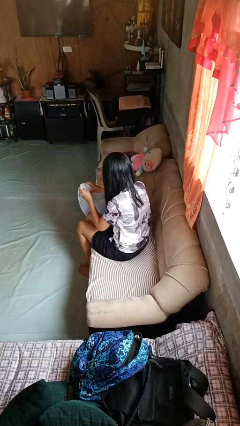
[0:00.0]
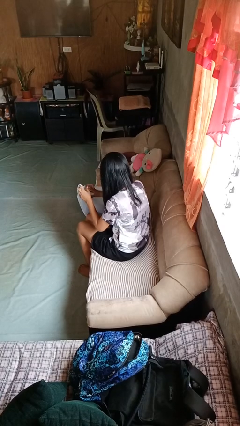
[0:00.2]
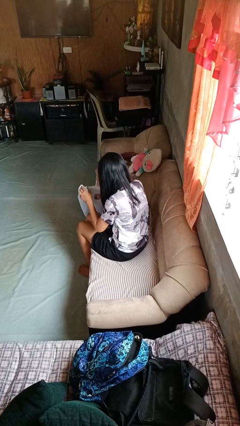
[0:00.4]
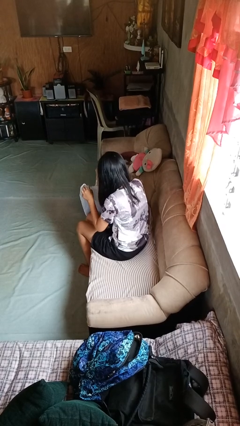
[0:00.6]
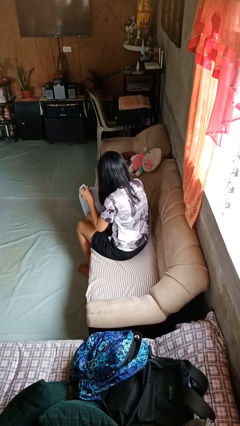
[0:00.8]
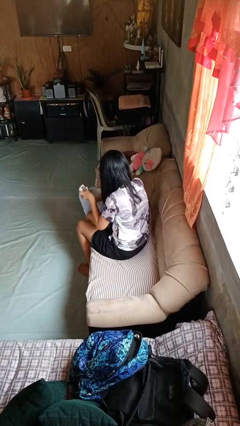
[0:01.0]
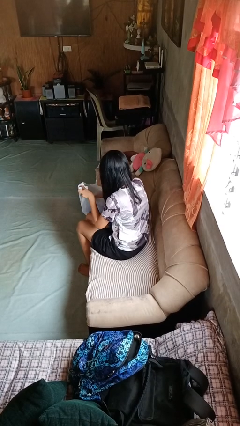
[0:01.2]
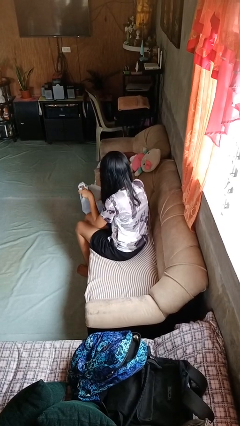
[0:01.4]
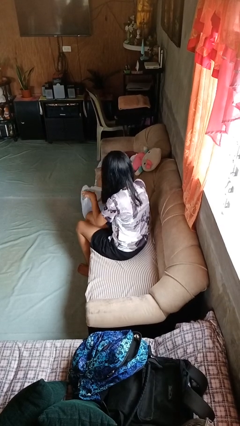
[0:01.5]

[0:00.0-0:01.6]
person searches in bag

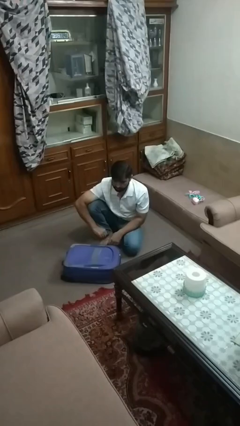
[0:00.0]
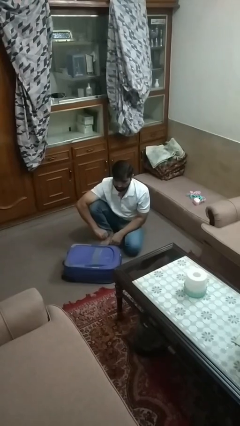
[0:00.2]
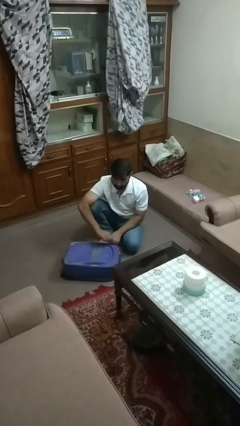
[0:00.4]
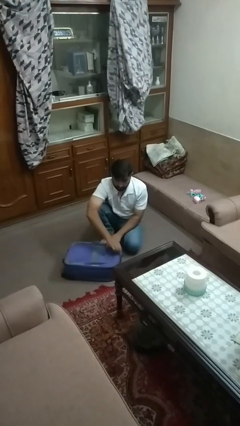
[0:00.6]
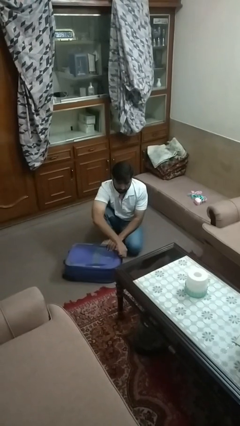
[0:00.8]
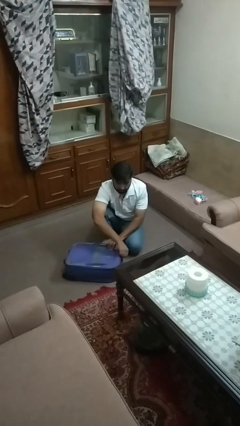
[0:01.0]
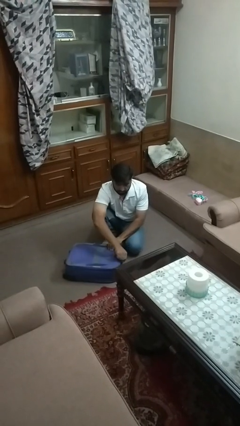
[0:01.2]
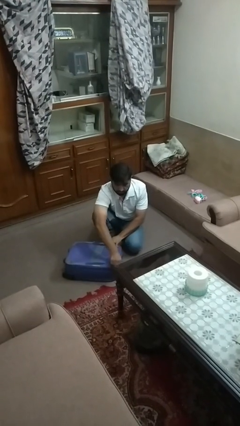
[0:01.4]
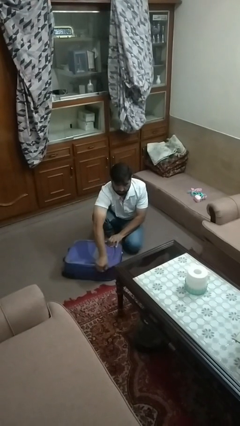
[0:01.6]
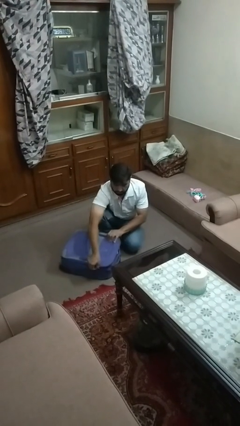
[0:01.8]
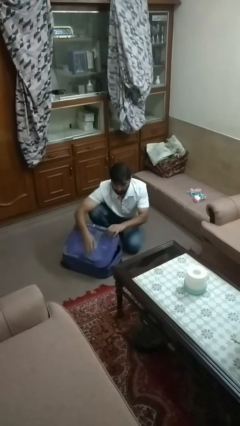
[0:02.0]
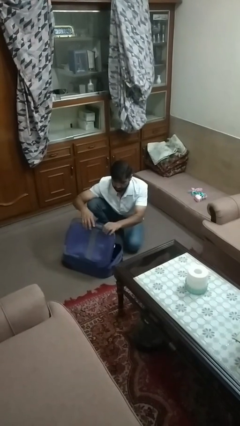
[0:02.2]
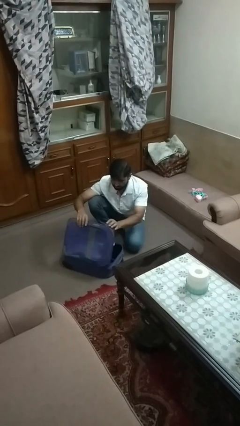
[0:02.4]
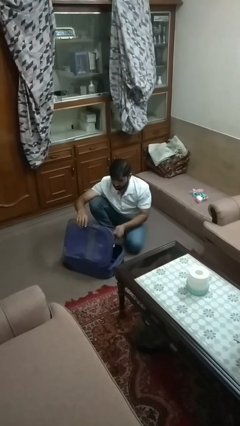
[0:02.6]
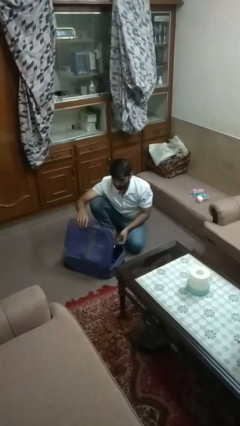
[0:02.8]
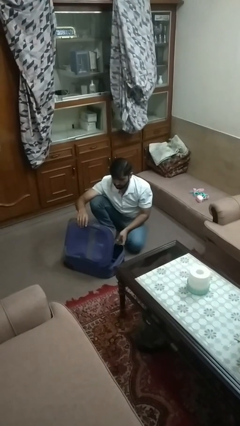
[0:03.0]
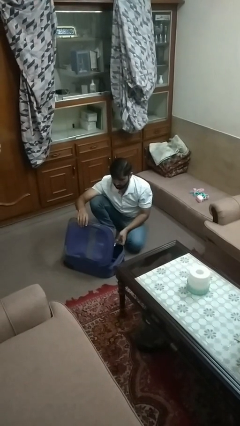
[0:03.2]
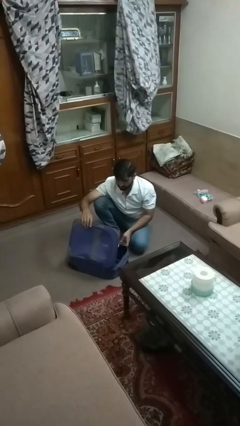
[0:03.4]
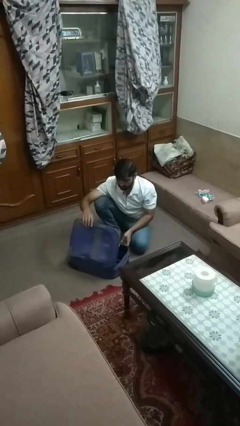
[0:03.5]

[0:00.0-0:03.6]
person opens suitcase

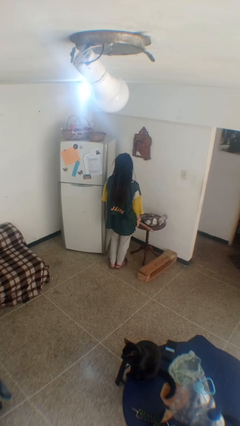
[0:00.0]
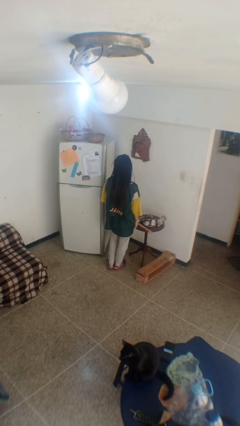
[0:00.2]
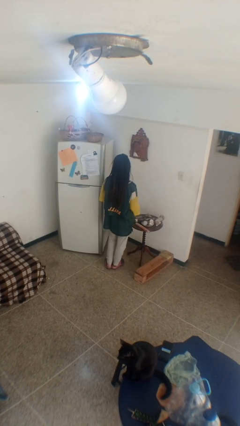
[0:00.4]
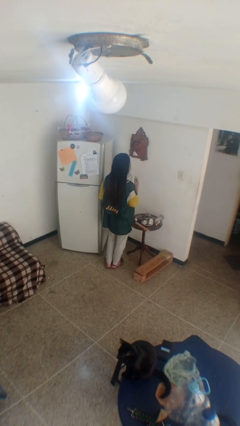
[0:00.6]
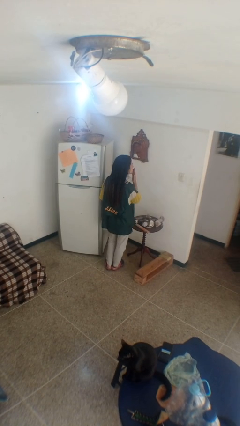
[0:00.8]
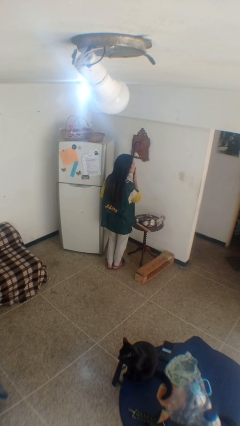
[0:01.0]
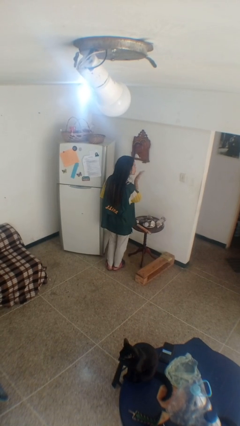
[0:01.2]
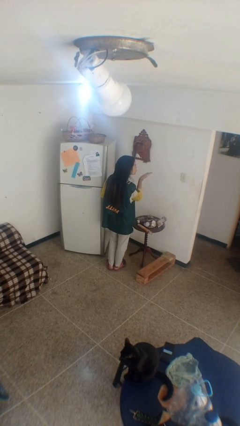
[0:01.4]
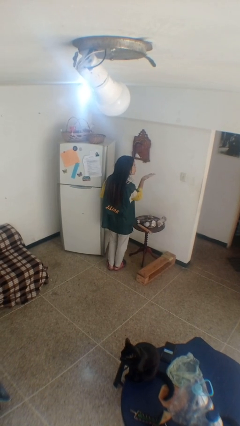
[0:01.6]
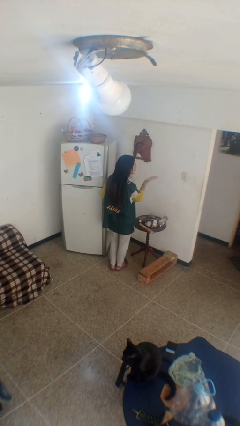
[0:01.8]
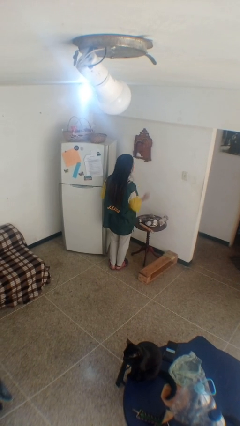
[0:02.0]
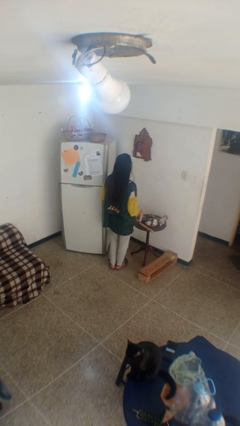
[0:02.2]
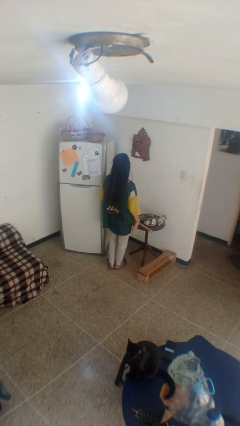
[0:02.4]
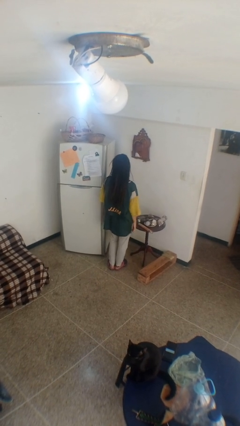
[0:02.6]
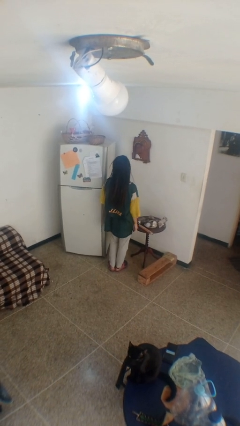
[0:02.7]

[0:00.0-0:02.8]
person gestures blow kiss

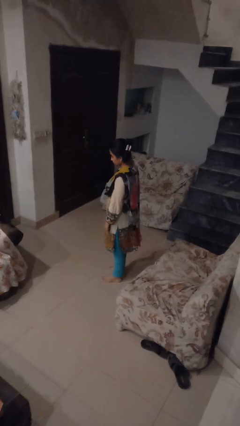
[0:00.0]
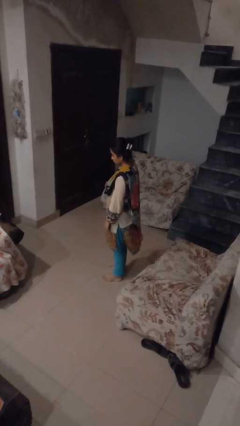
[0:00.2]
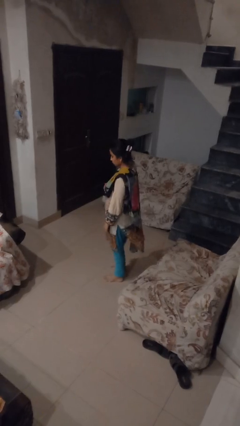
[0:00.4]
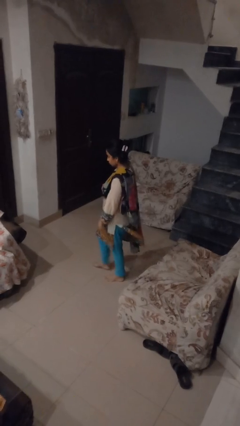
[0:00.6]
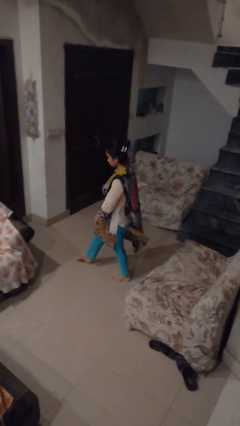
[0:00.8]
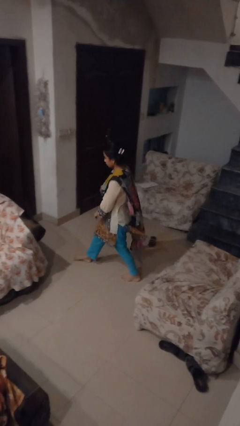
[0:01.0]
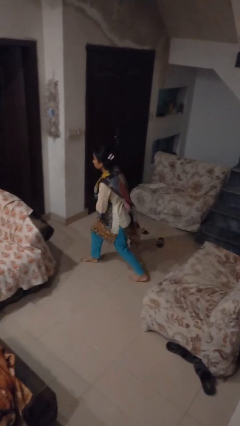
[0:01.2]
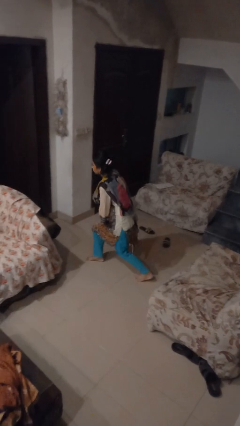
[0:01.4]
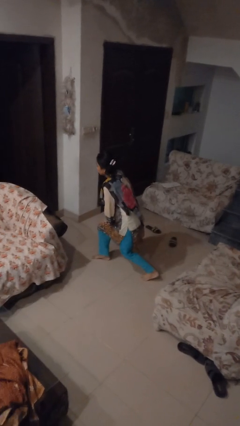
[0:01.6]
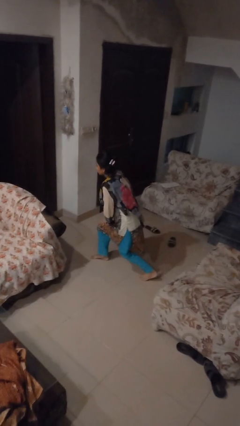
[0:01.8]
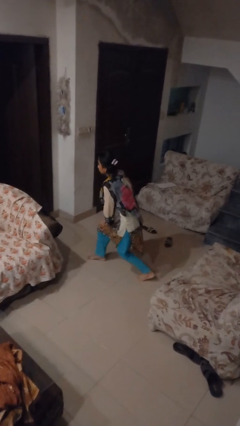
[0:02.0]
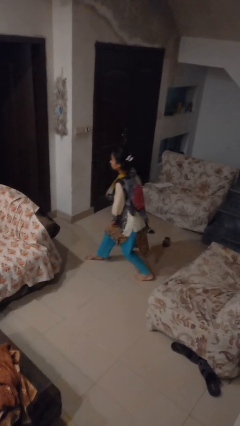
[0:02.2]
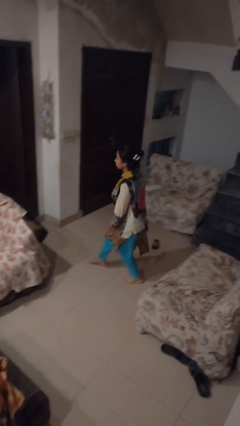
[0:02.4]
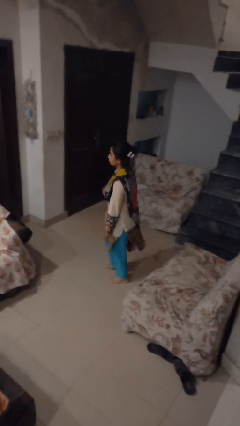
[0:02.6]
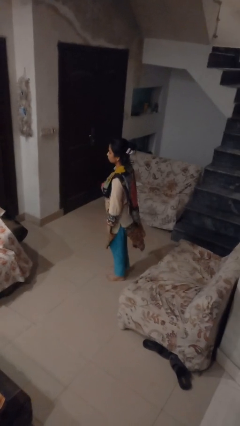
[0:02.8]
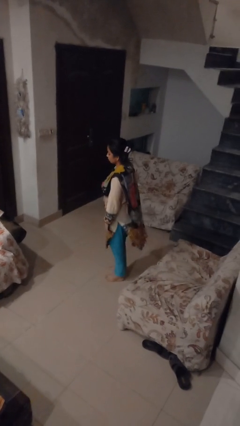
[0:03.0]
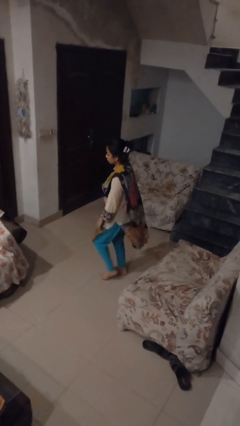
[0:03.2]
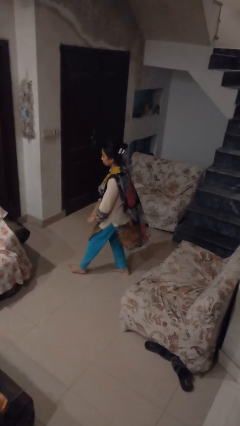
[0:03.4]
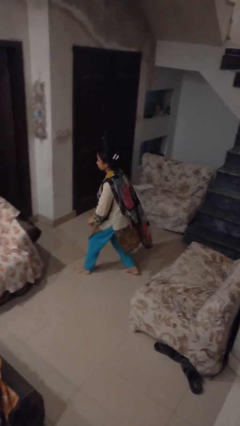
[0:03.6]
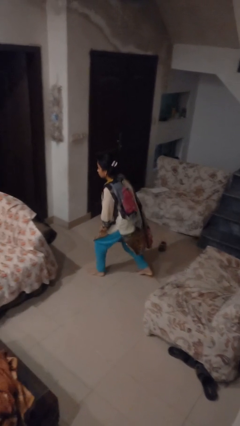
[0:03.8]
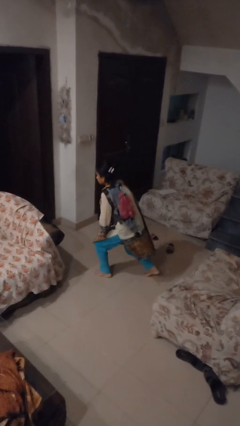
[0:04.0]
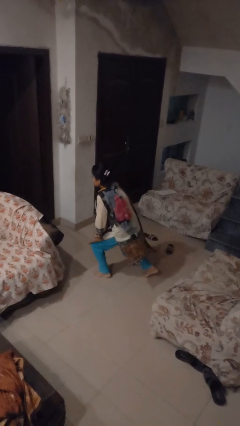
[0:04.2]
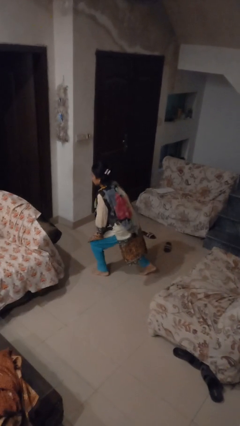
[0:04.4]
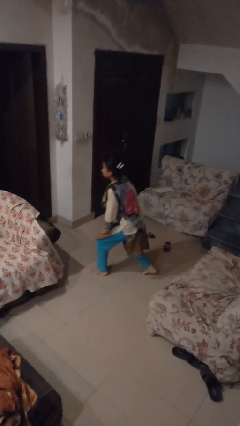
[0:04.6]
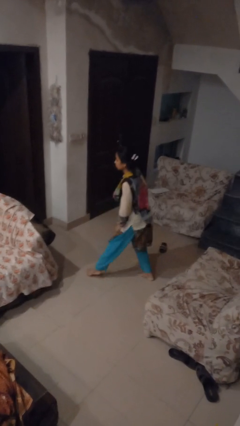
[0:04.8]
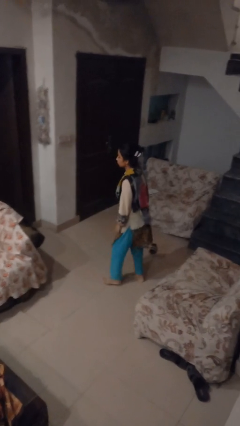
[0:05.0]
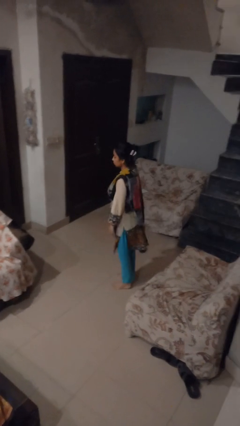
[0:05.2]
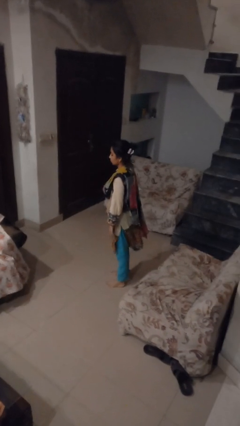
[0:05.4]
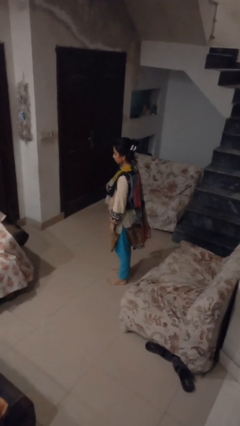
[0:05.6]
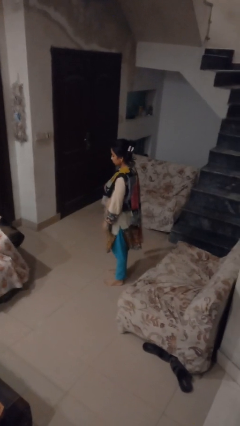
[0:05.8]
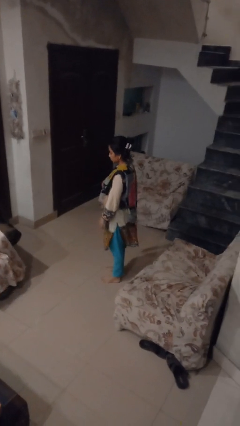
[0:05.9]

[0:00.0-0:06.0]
person exercises with lunges

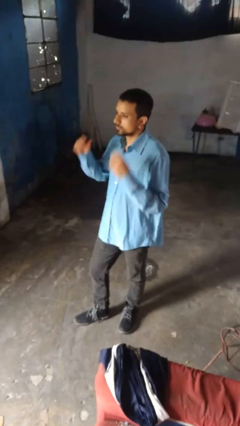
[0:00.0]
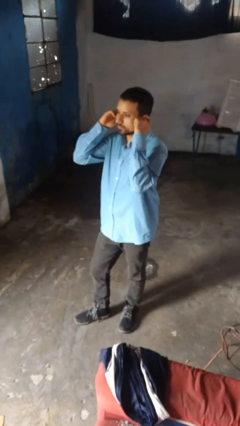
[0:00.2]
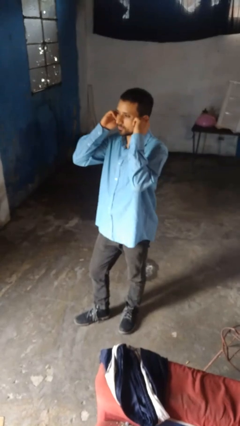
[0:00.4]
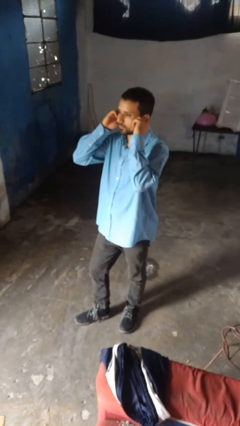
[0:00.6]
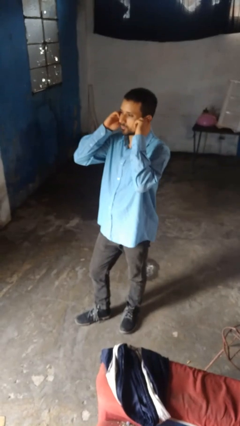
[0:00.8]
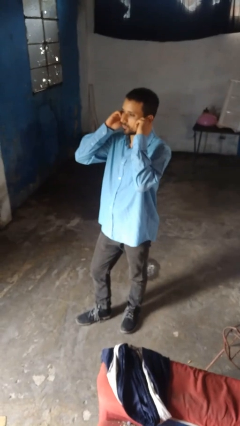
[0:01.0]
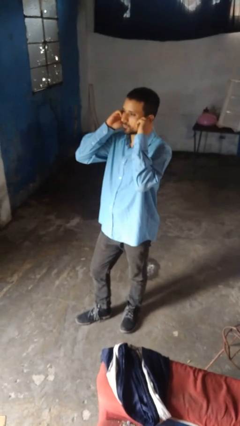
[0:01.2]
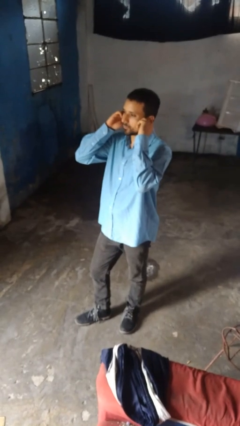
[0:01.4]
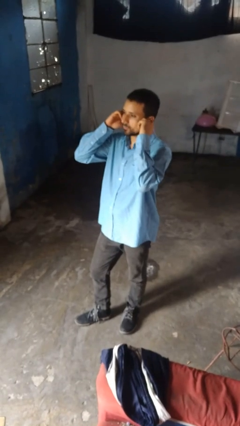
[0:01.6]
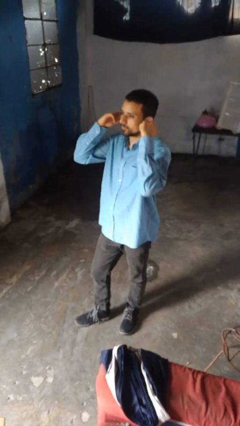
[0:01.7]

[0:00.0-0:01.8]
person puts fingers in ear

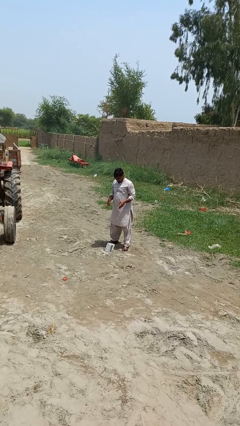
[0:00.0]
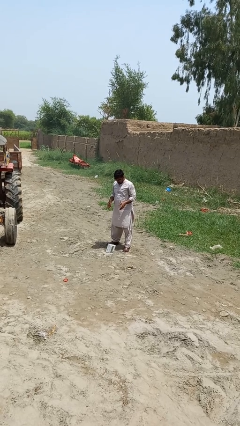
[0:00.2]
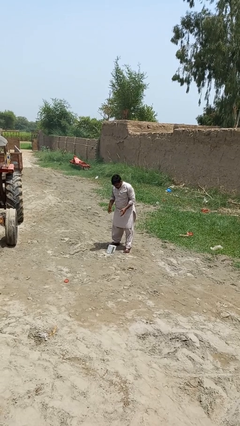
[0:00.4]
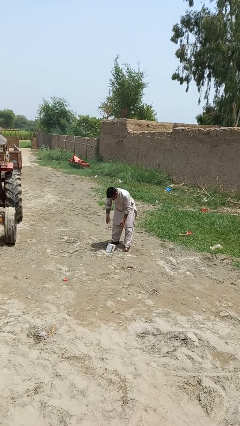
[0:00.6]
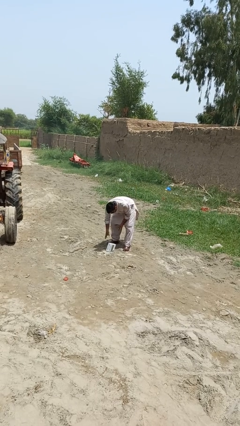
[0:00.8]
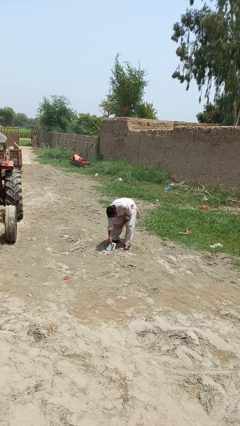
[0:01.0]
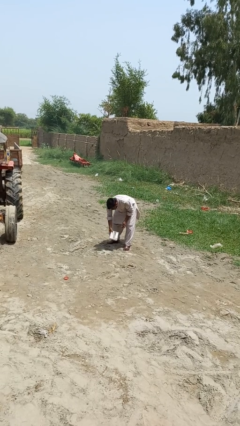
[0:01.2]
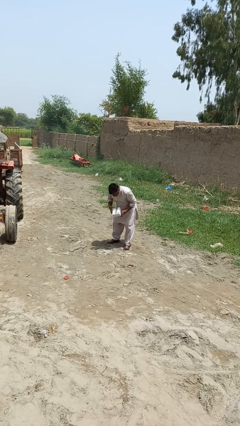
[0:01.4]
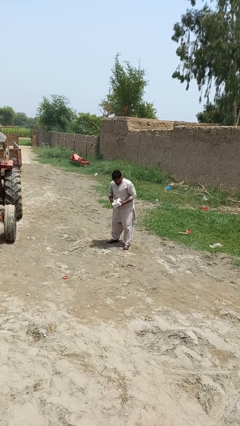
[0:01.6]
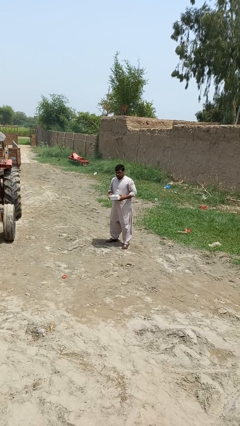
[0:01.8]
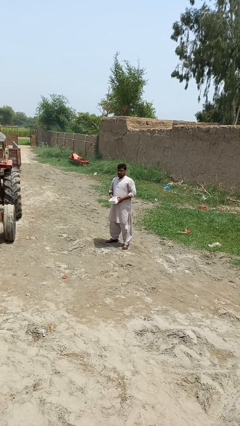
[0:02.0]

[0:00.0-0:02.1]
person picks up object from floor
